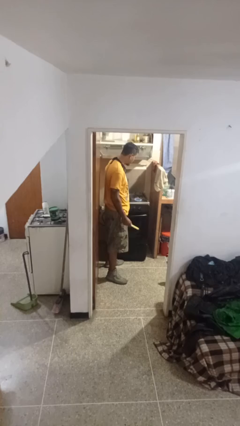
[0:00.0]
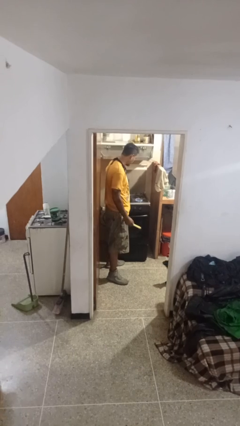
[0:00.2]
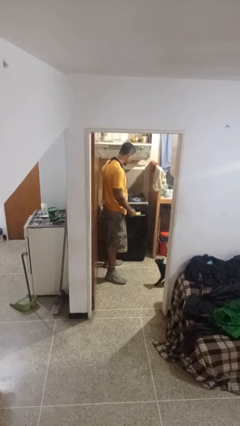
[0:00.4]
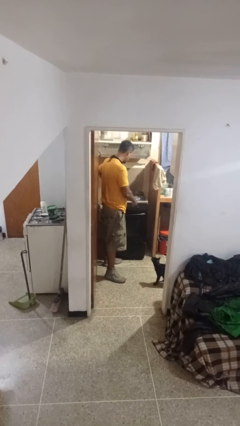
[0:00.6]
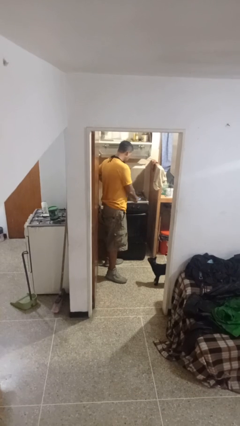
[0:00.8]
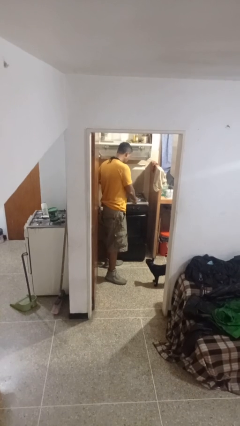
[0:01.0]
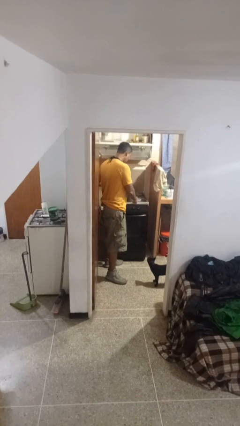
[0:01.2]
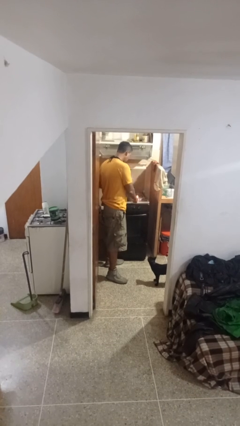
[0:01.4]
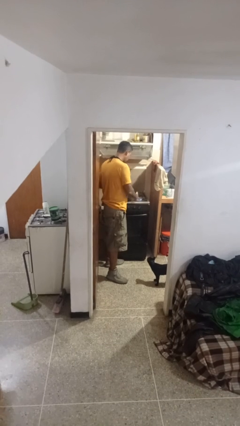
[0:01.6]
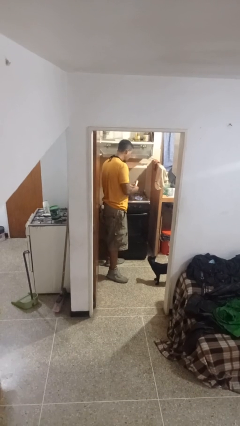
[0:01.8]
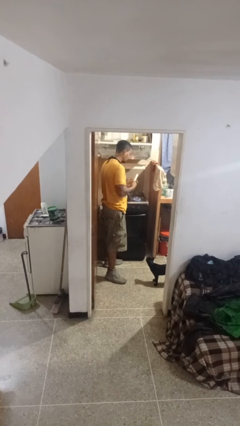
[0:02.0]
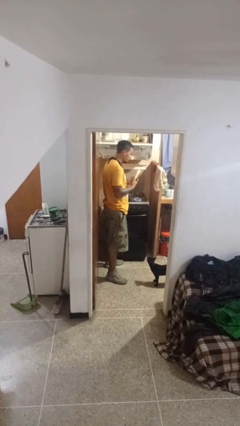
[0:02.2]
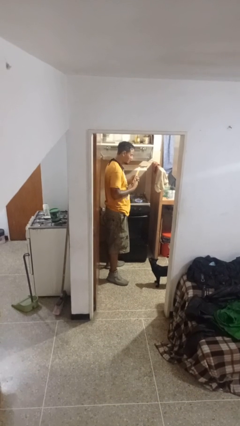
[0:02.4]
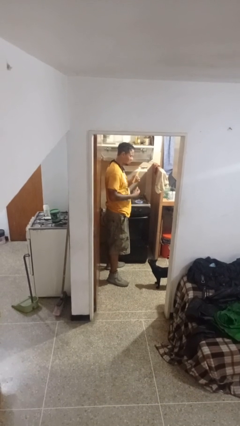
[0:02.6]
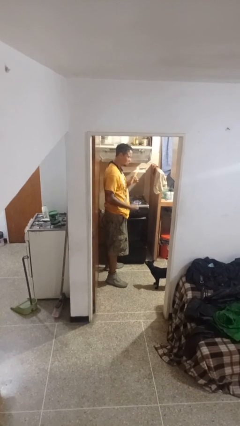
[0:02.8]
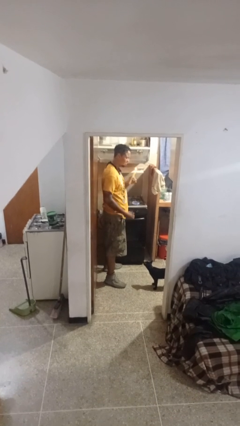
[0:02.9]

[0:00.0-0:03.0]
person lights candle

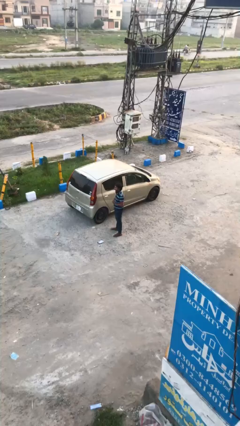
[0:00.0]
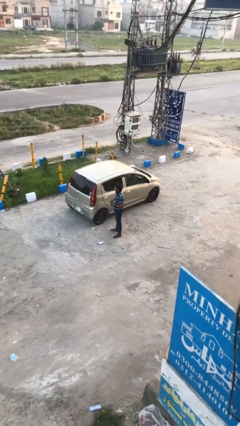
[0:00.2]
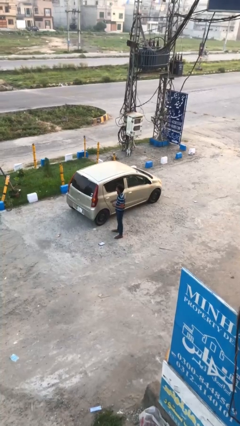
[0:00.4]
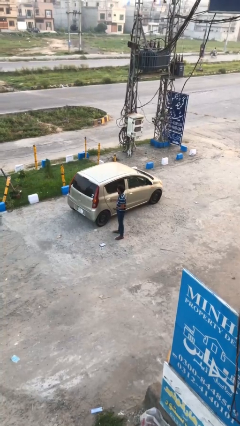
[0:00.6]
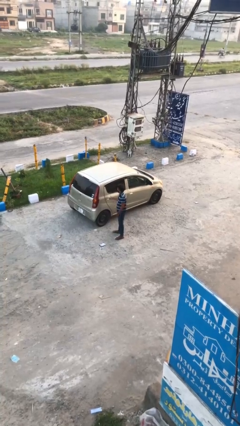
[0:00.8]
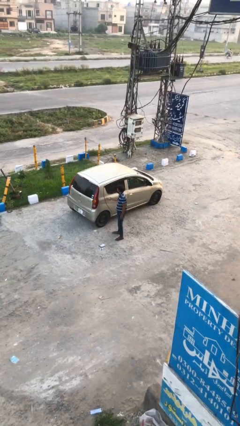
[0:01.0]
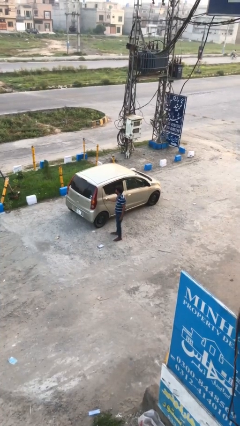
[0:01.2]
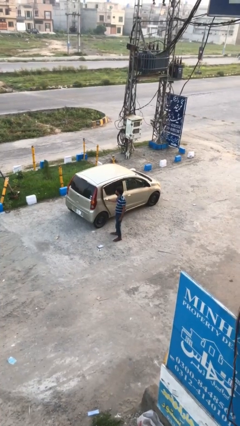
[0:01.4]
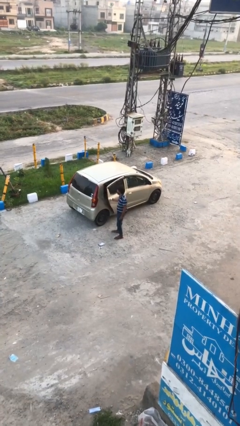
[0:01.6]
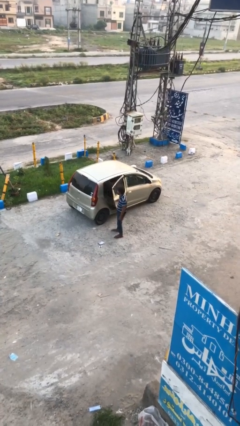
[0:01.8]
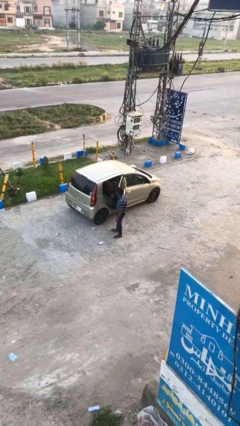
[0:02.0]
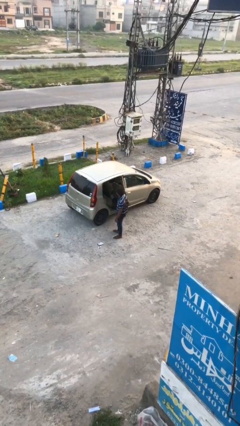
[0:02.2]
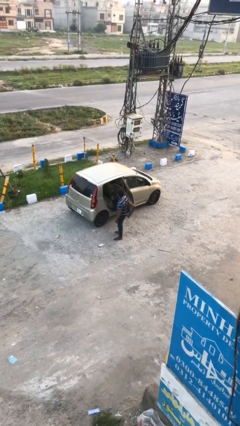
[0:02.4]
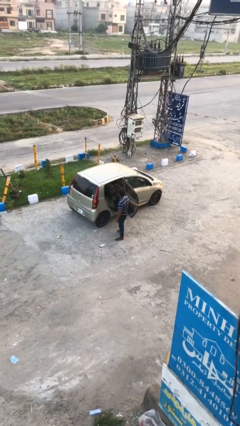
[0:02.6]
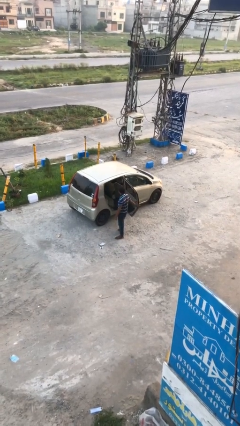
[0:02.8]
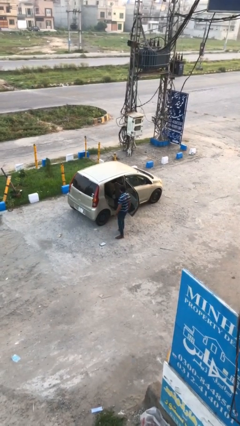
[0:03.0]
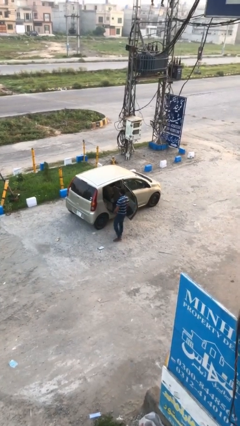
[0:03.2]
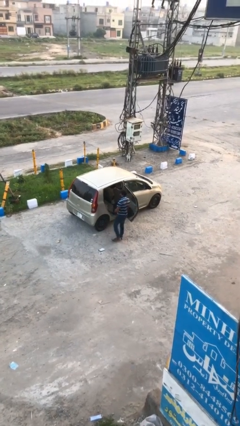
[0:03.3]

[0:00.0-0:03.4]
person opens car door

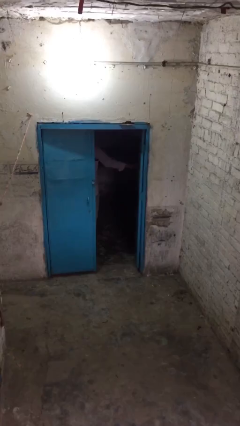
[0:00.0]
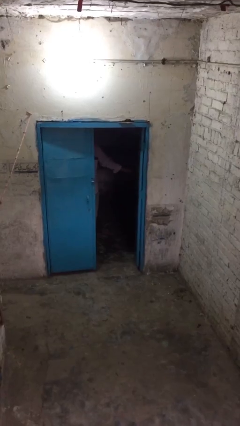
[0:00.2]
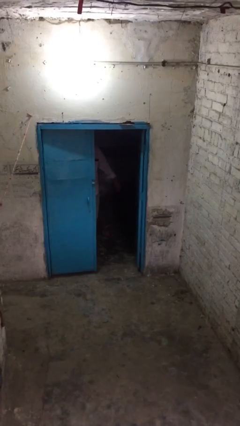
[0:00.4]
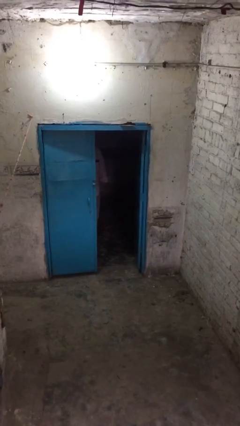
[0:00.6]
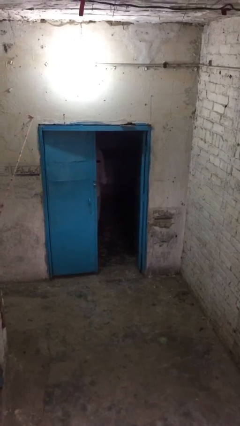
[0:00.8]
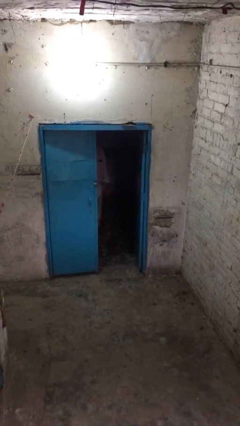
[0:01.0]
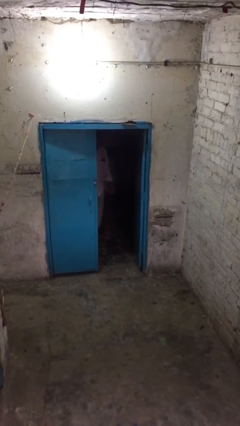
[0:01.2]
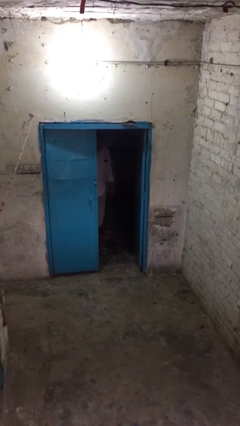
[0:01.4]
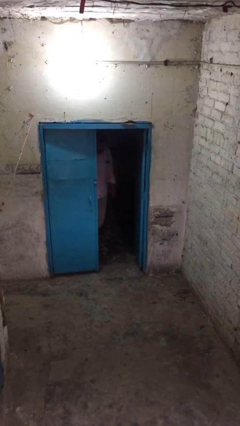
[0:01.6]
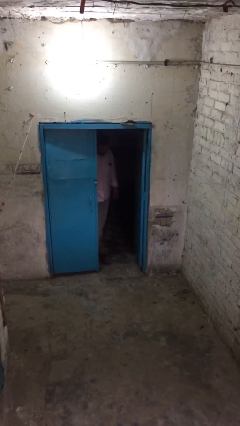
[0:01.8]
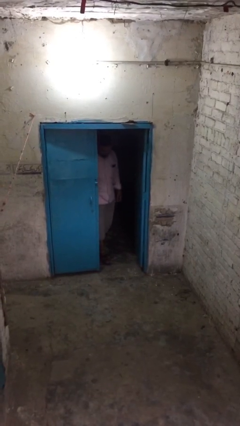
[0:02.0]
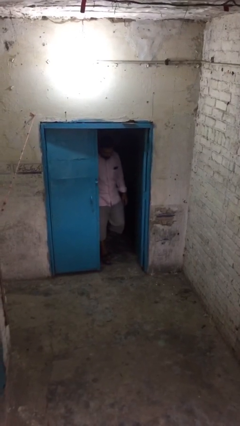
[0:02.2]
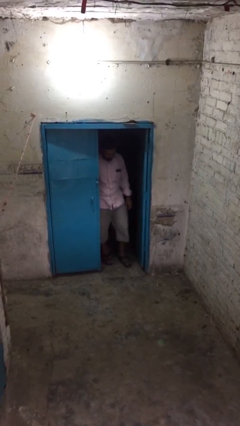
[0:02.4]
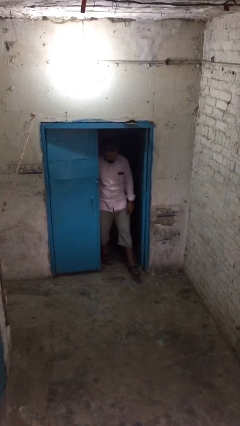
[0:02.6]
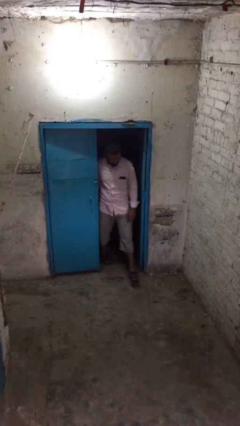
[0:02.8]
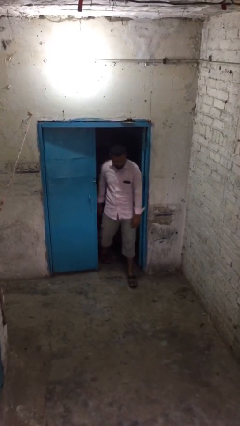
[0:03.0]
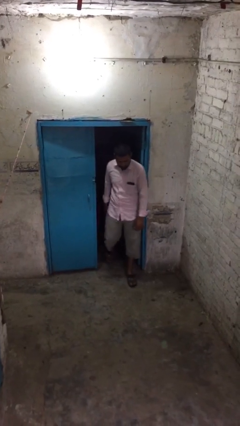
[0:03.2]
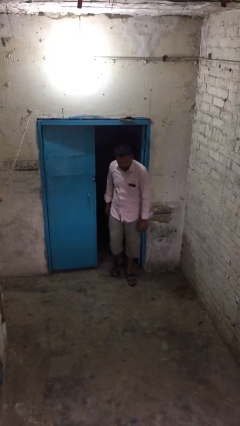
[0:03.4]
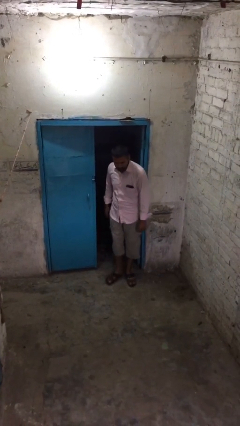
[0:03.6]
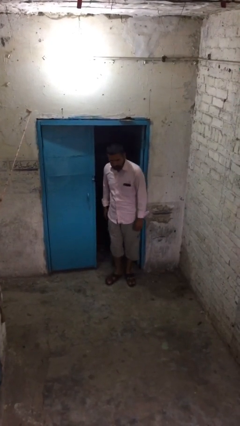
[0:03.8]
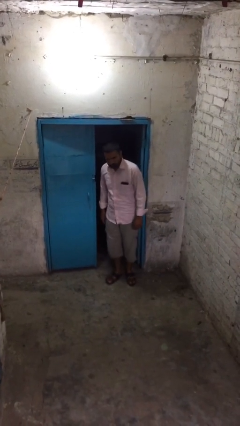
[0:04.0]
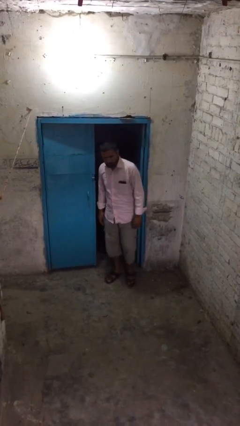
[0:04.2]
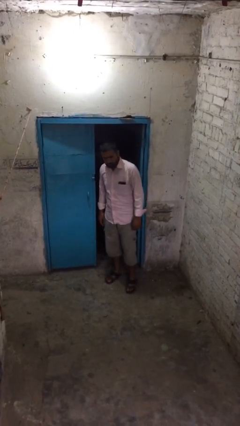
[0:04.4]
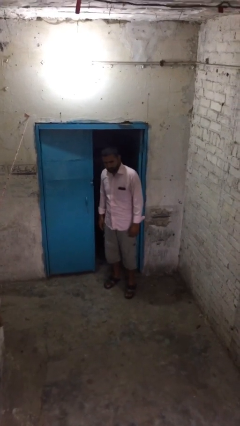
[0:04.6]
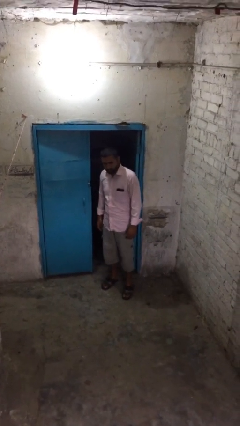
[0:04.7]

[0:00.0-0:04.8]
person enters scene through structure

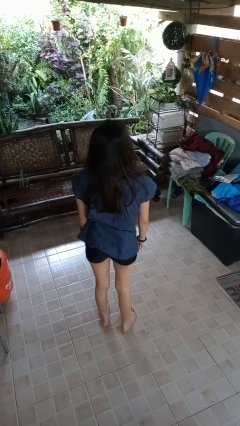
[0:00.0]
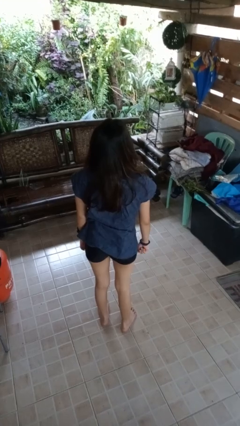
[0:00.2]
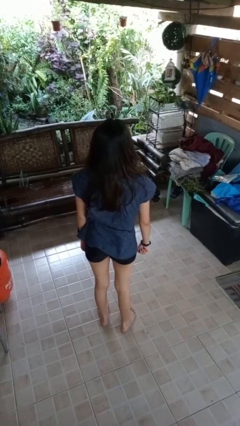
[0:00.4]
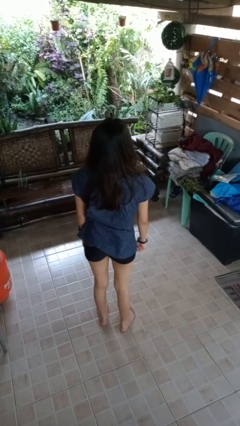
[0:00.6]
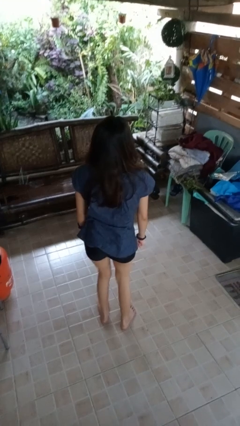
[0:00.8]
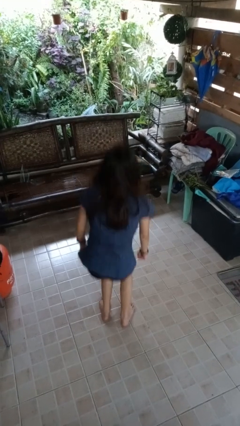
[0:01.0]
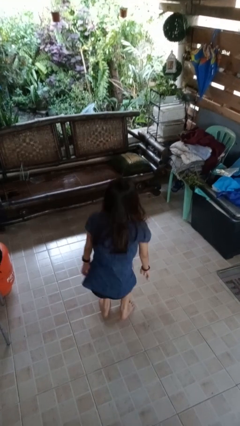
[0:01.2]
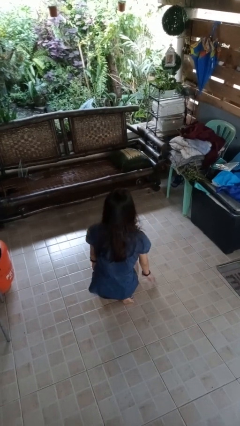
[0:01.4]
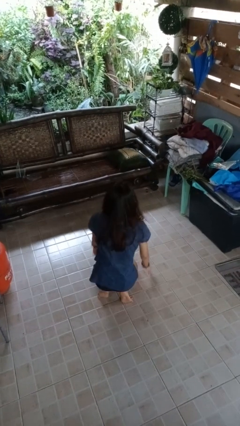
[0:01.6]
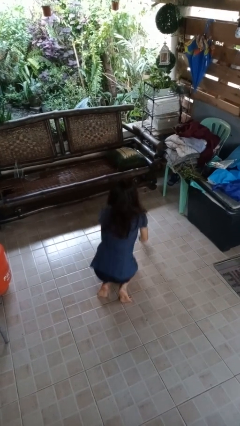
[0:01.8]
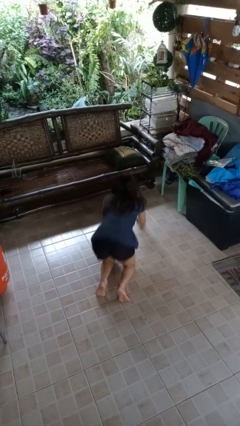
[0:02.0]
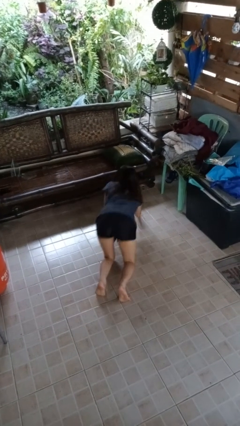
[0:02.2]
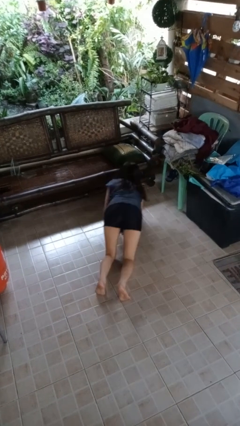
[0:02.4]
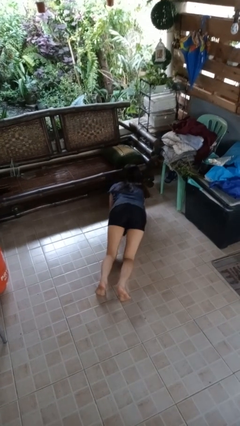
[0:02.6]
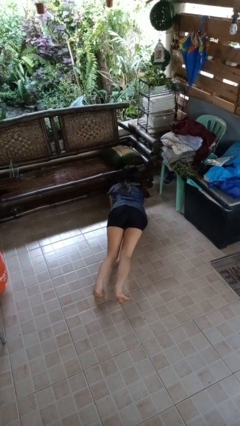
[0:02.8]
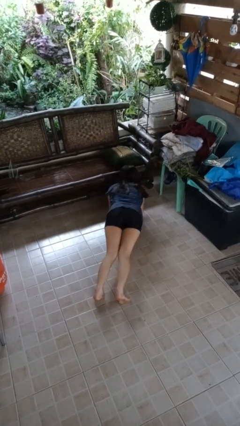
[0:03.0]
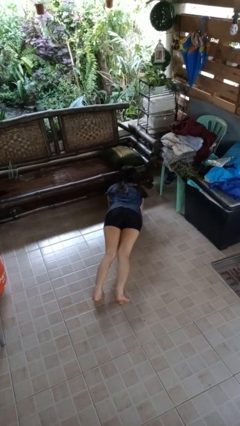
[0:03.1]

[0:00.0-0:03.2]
person exercises with plank

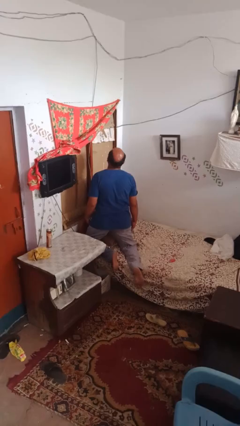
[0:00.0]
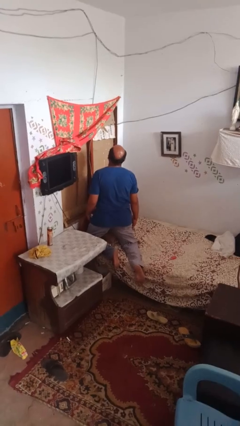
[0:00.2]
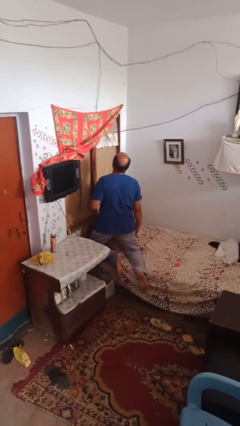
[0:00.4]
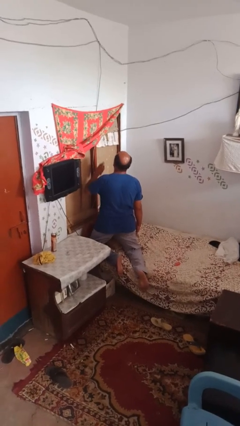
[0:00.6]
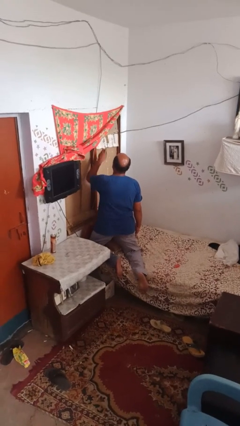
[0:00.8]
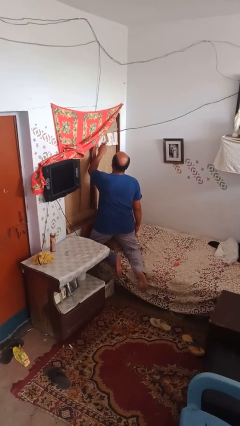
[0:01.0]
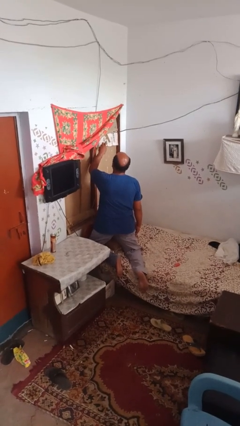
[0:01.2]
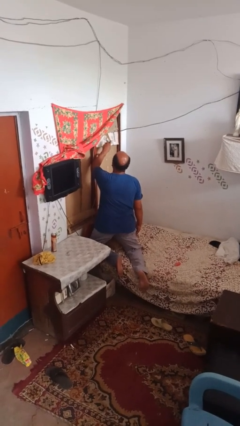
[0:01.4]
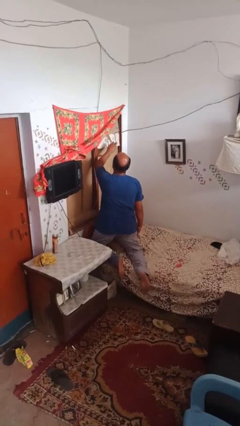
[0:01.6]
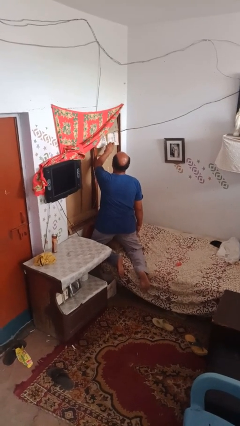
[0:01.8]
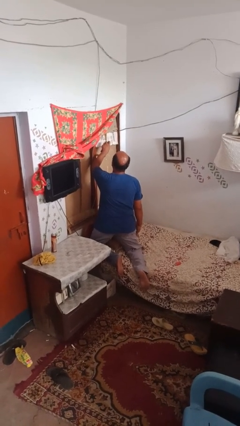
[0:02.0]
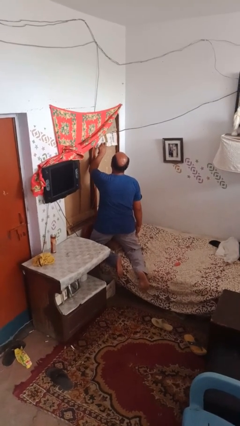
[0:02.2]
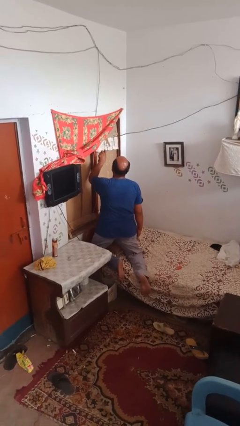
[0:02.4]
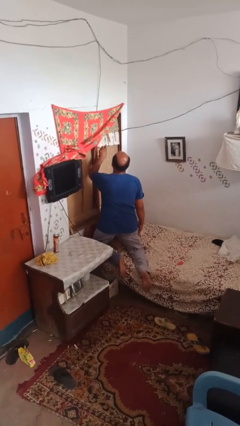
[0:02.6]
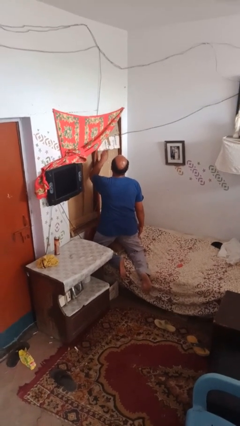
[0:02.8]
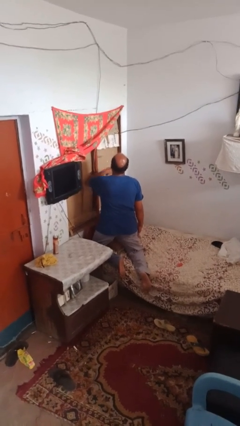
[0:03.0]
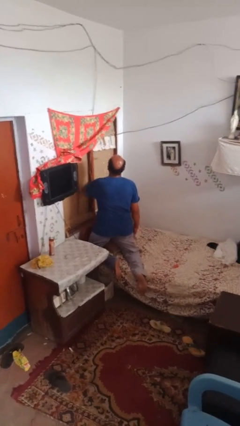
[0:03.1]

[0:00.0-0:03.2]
person sprays from bottle

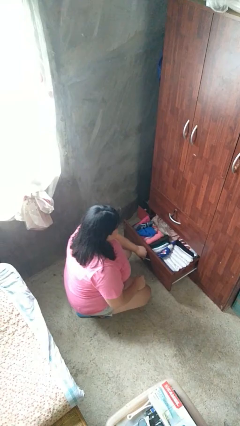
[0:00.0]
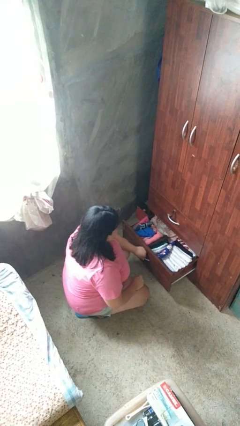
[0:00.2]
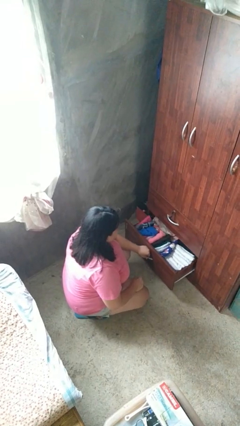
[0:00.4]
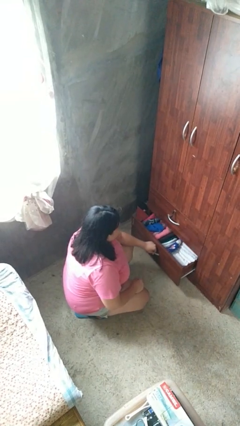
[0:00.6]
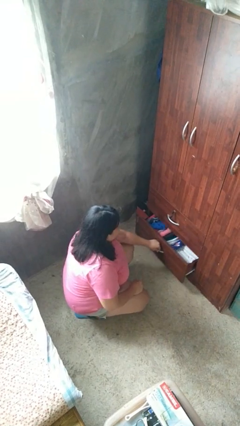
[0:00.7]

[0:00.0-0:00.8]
person closes dresser drawer
